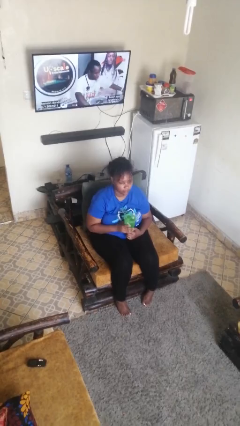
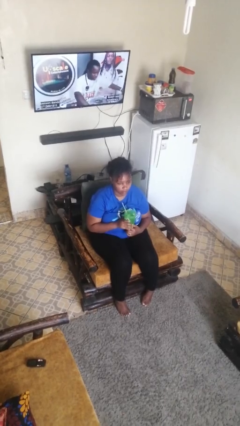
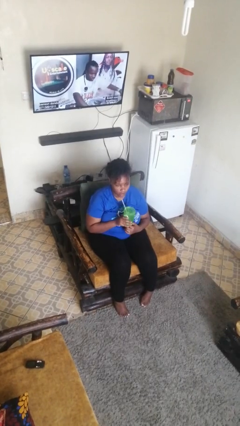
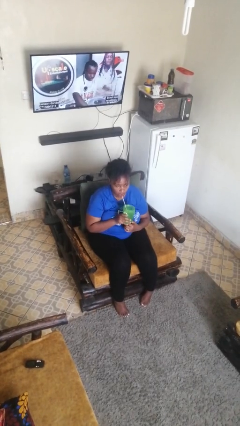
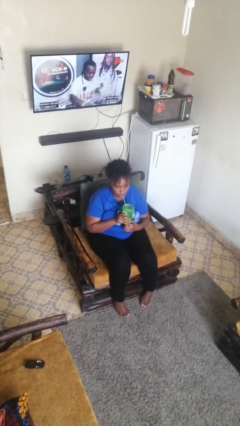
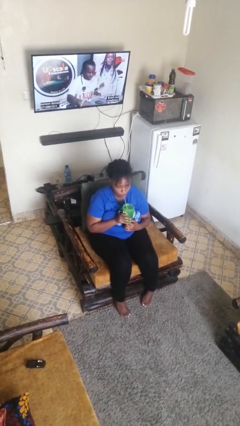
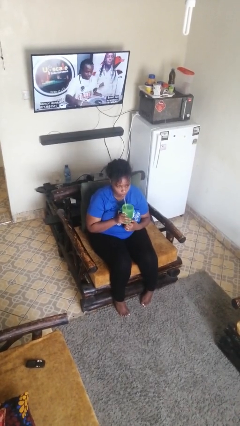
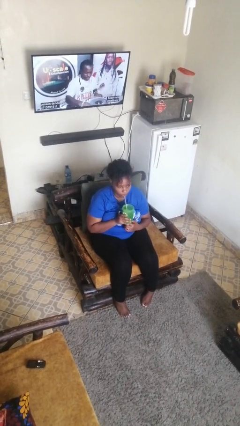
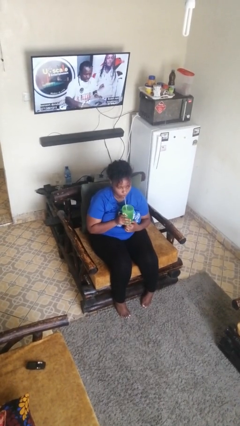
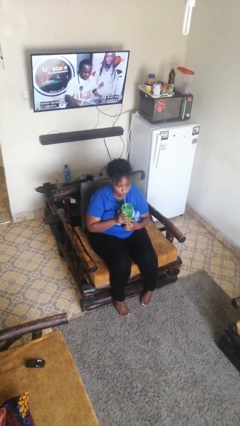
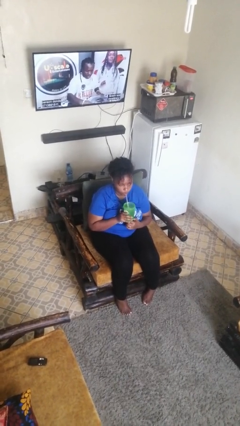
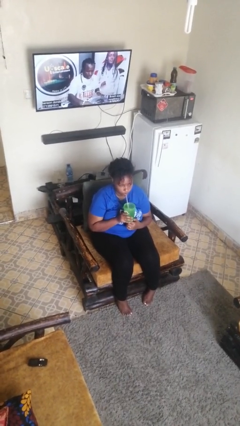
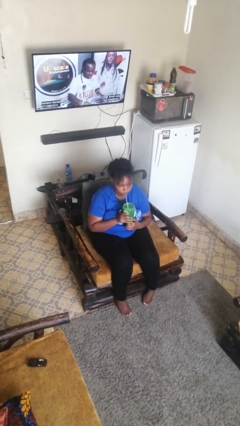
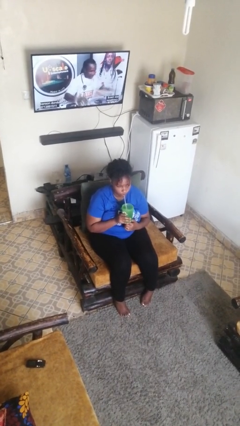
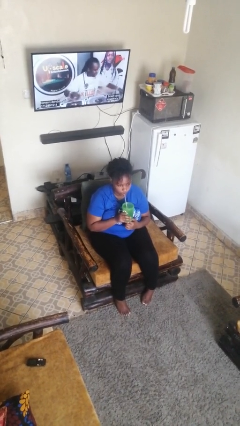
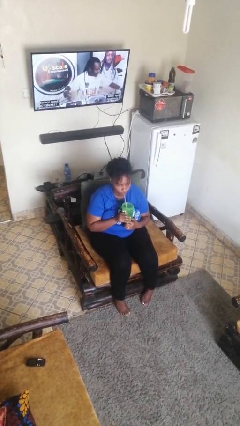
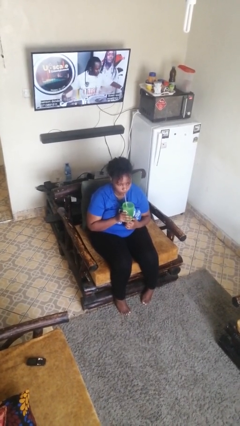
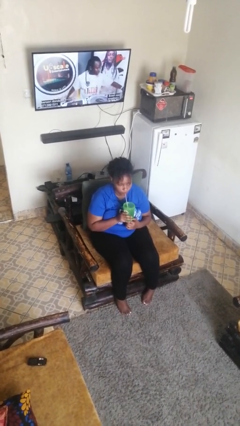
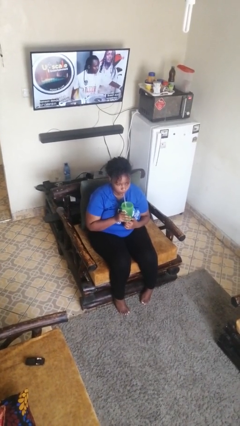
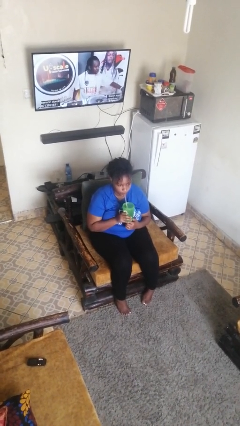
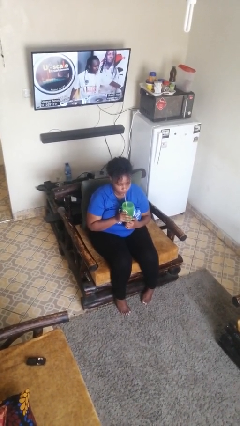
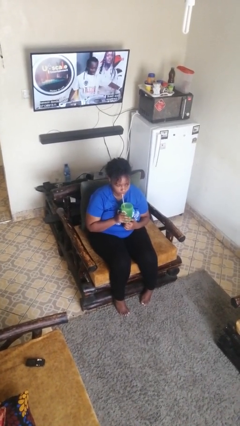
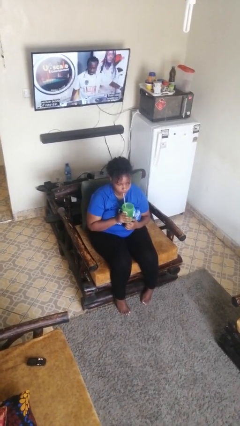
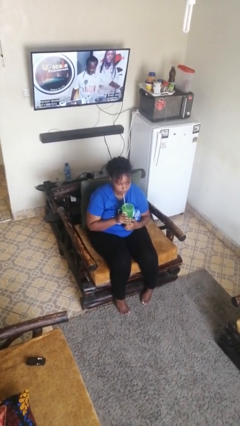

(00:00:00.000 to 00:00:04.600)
person drinks from straw

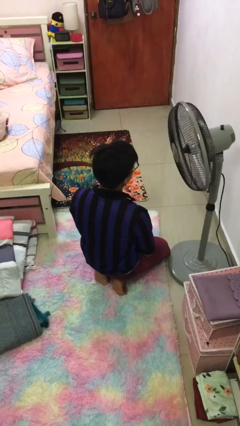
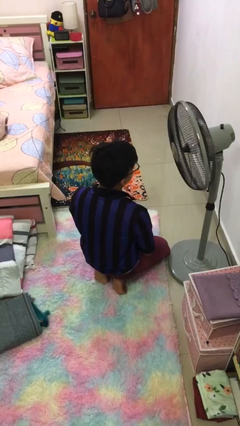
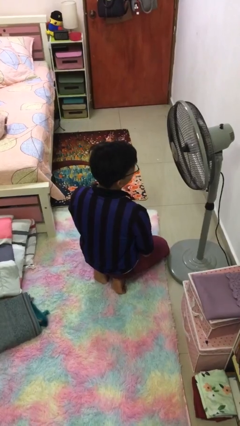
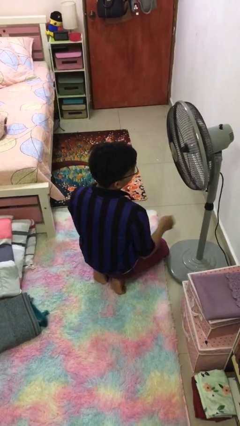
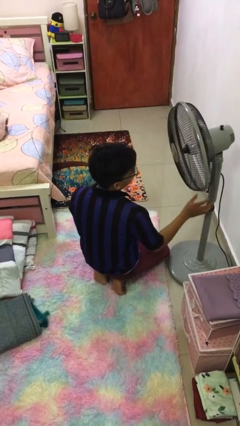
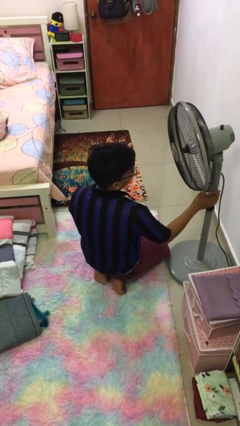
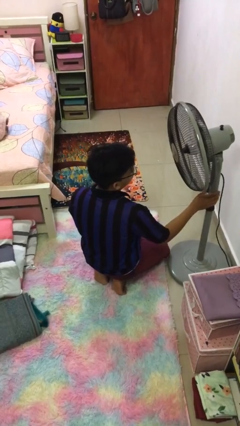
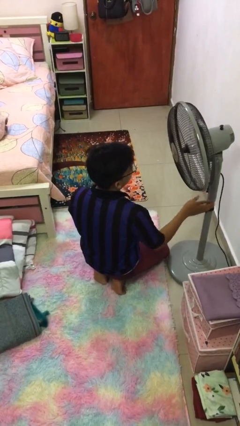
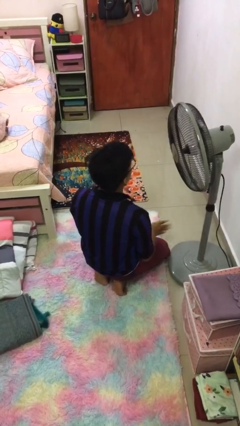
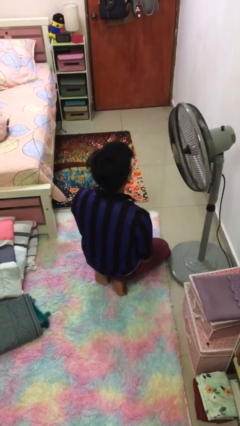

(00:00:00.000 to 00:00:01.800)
person turns off fan

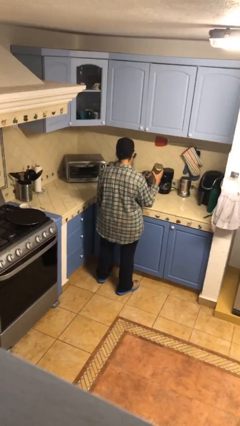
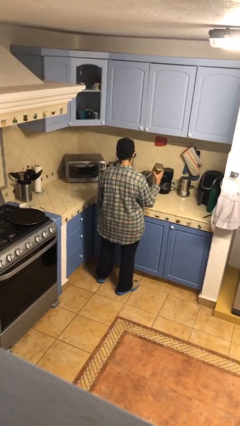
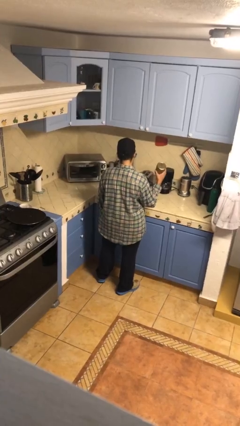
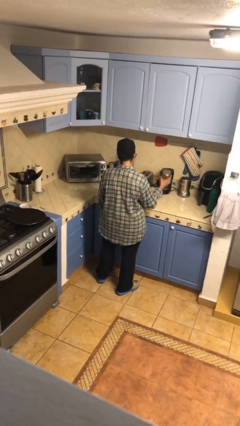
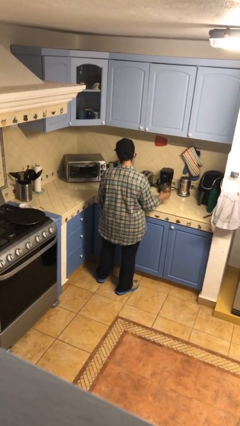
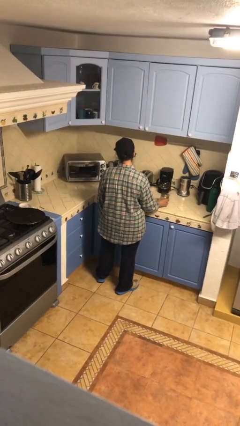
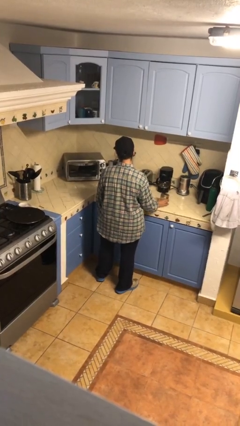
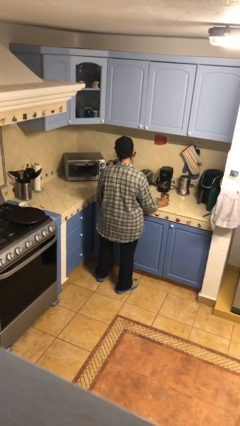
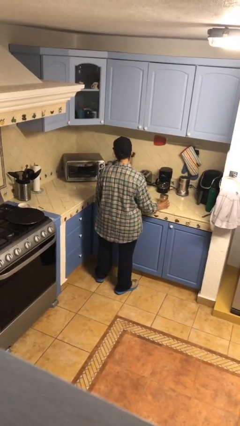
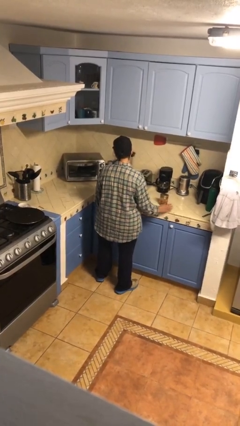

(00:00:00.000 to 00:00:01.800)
person puts down object on countertop

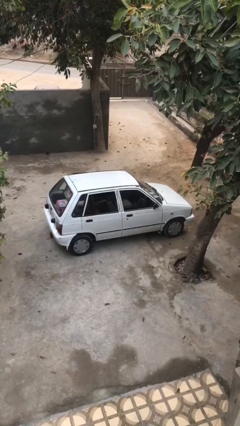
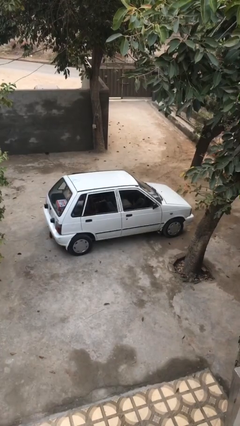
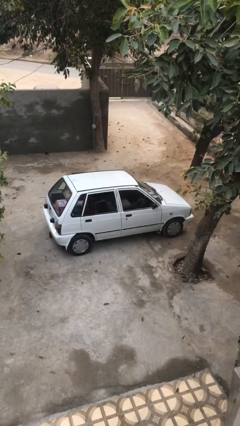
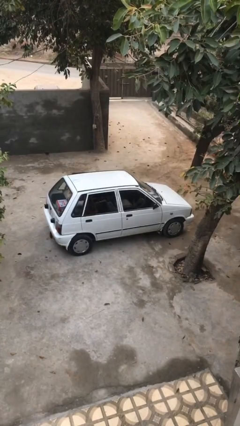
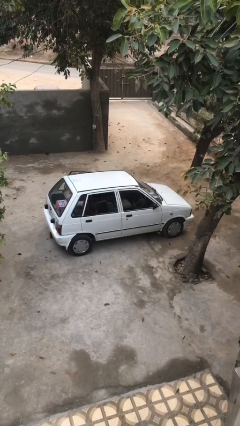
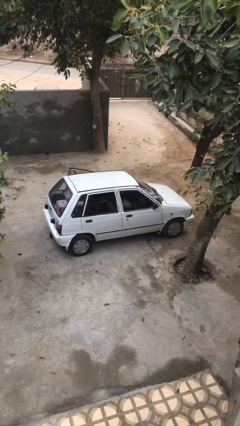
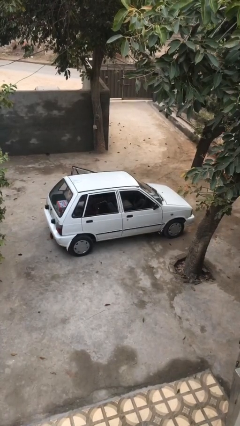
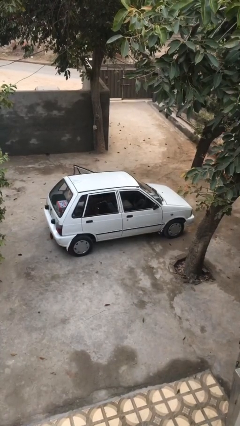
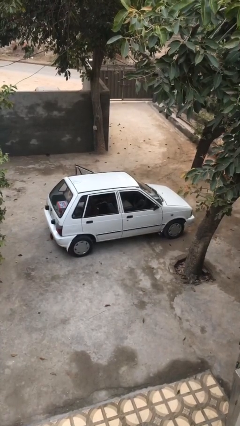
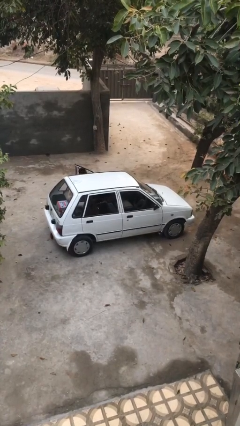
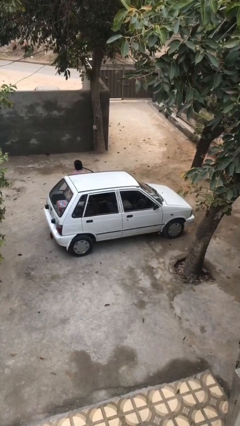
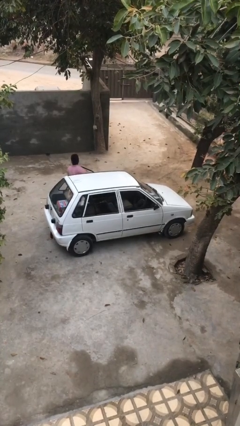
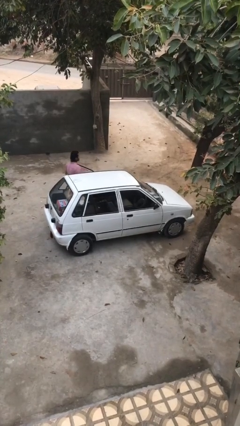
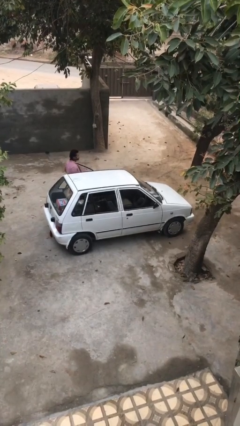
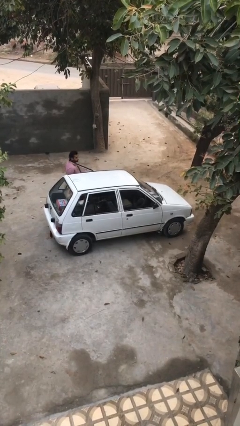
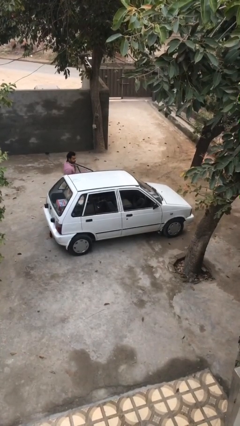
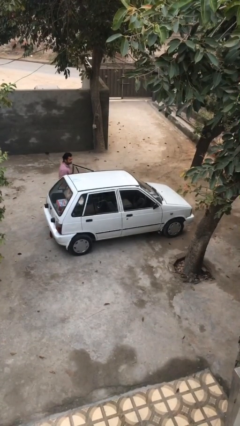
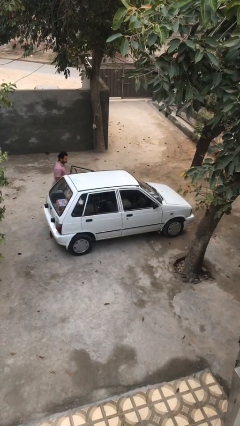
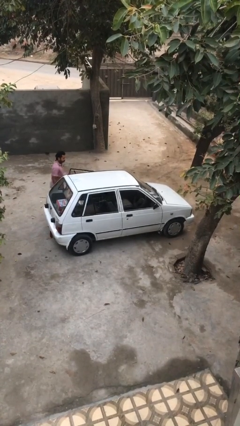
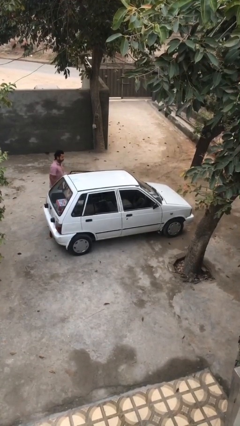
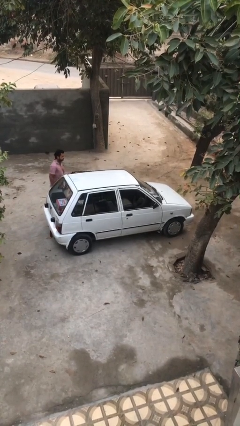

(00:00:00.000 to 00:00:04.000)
car drops off person

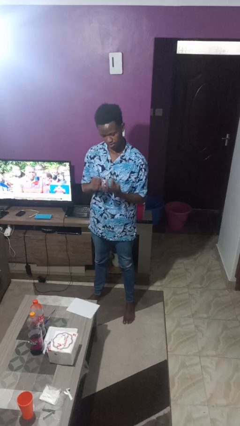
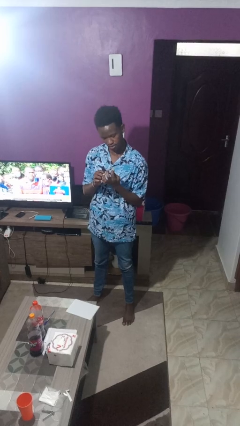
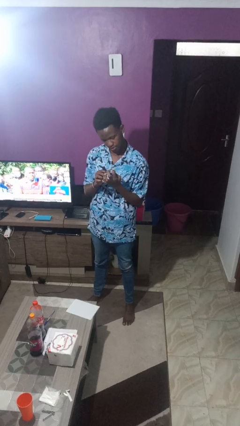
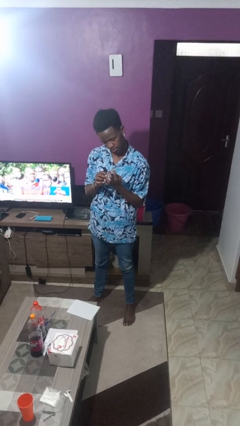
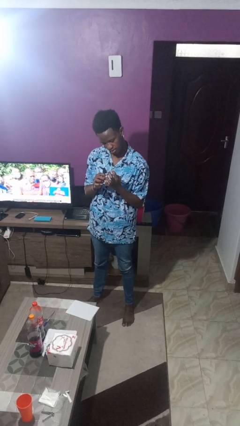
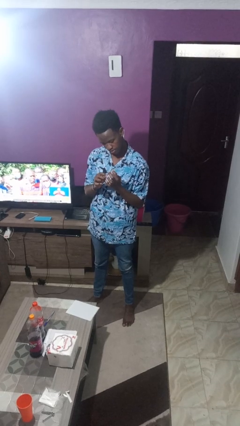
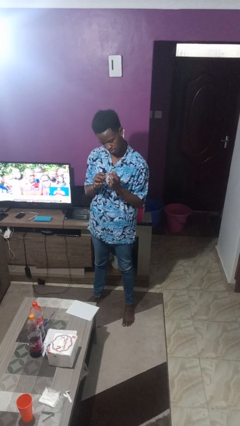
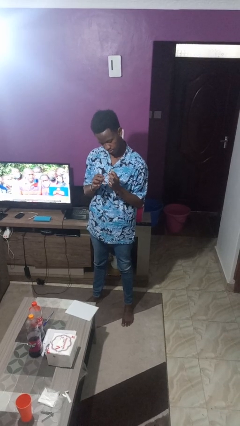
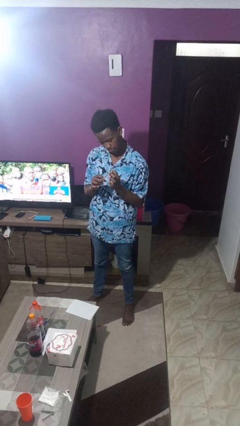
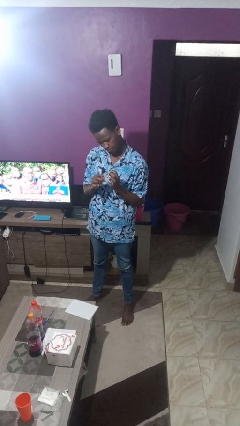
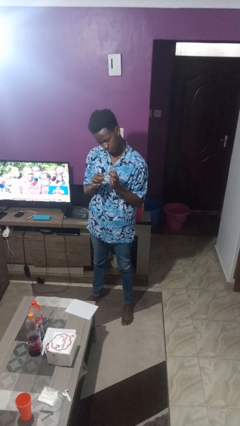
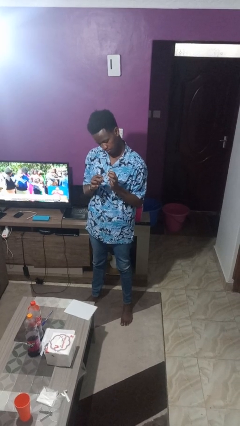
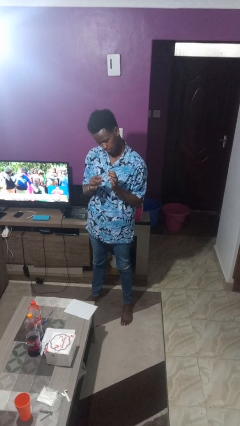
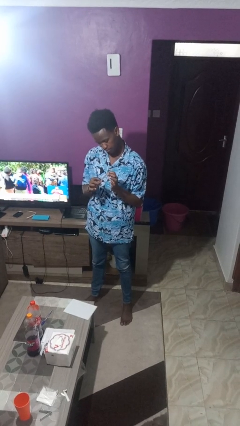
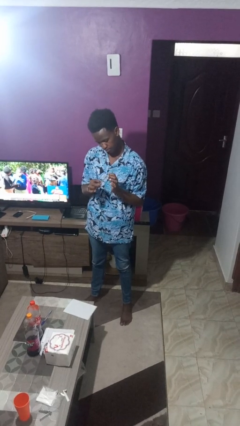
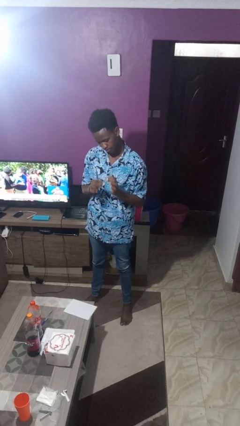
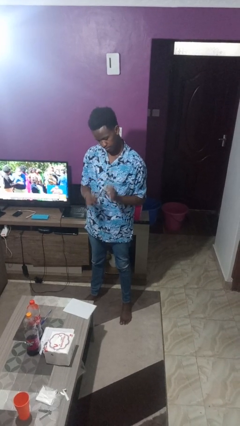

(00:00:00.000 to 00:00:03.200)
person files fingernails

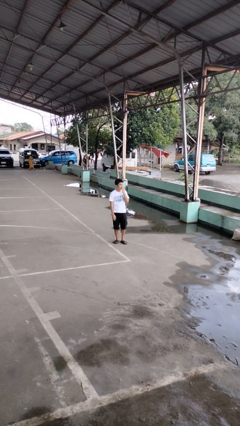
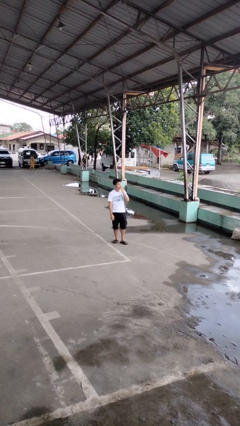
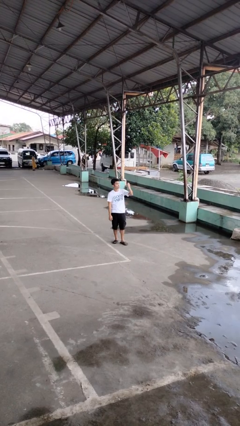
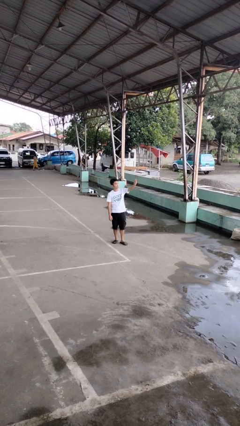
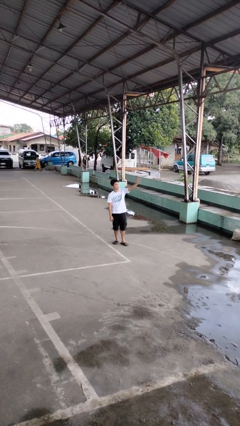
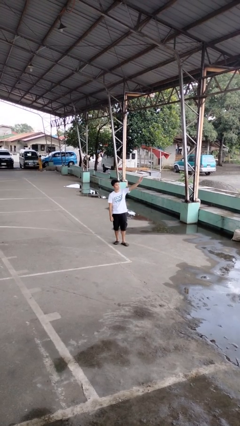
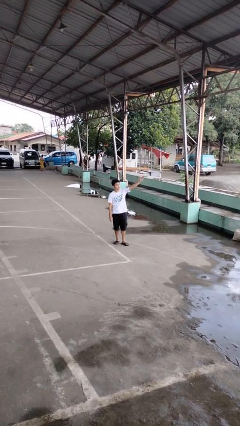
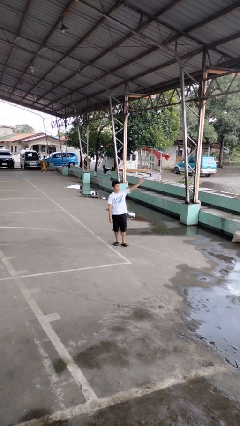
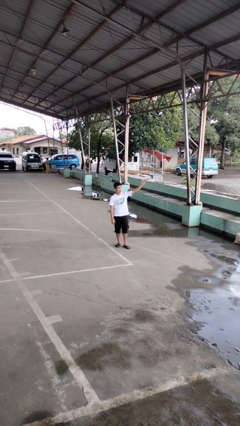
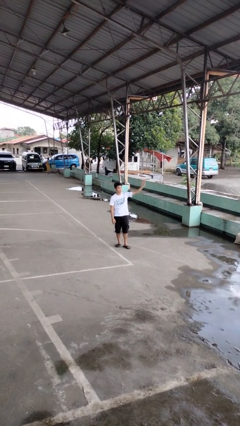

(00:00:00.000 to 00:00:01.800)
person gestures blow kiss

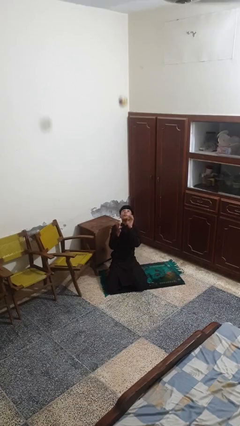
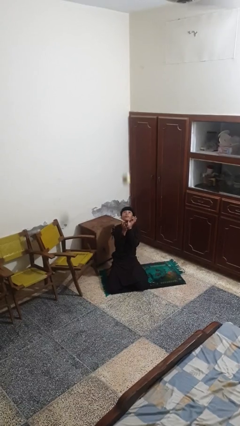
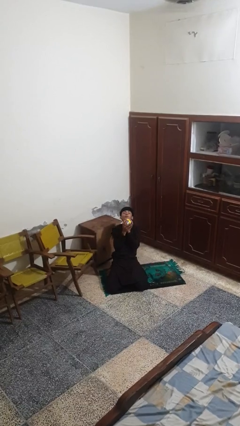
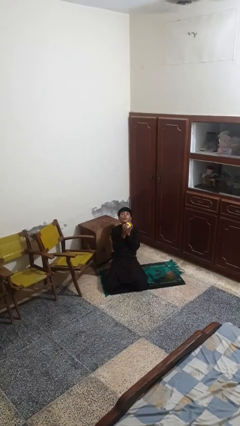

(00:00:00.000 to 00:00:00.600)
person catches dropped object
